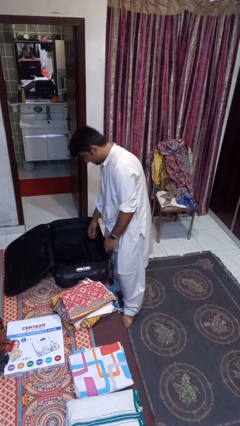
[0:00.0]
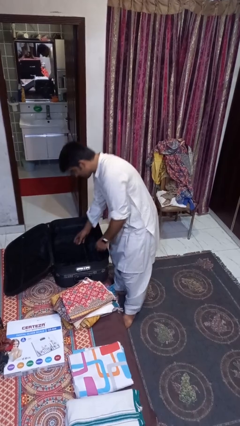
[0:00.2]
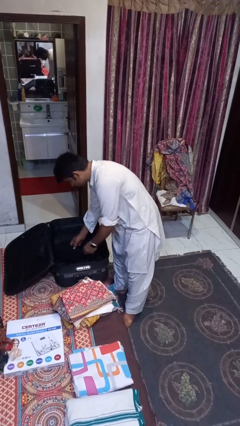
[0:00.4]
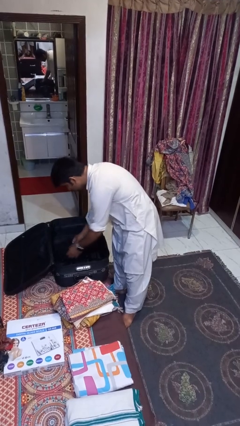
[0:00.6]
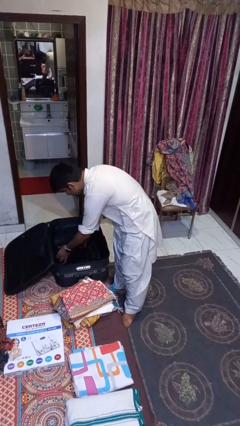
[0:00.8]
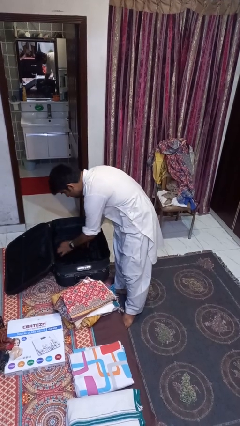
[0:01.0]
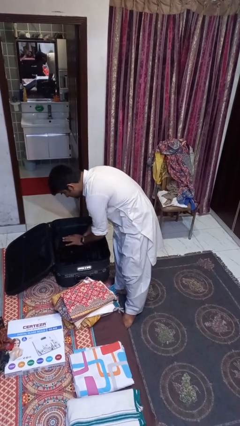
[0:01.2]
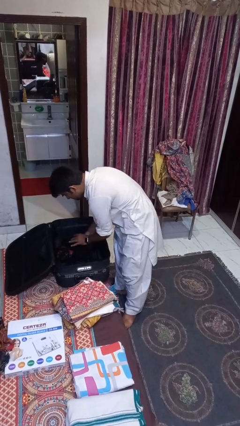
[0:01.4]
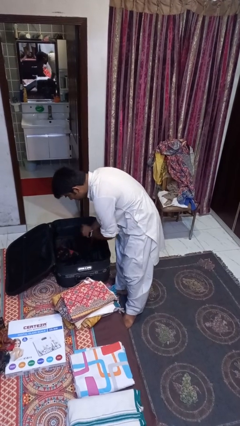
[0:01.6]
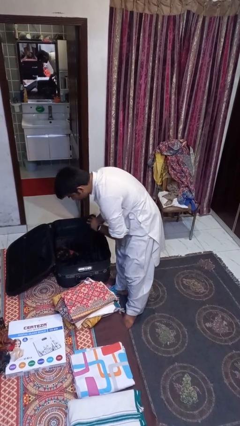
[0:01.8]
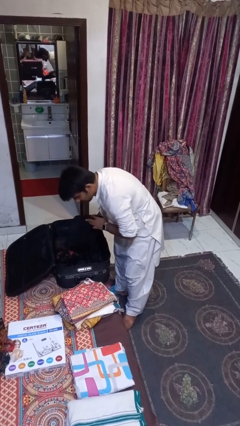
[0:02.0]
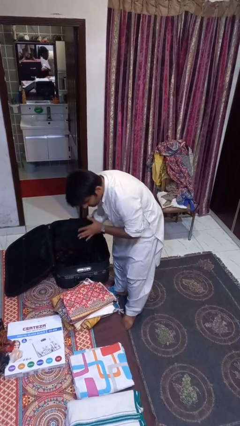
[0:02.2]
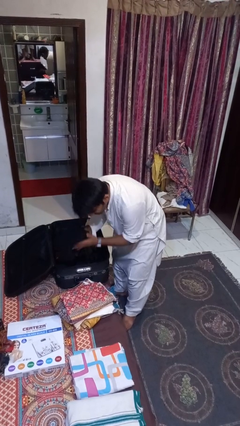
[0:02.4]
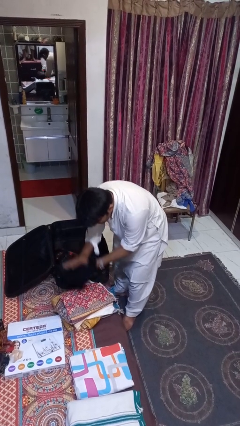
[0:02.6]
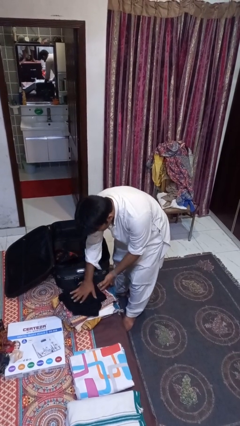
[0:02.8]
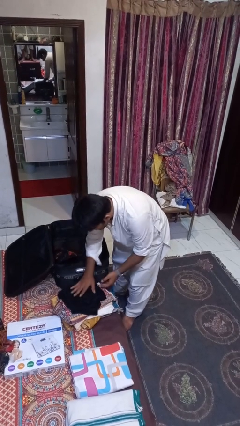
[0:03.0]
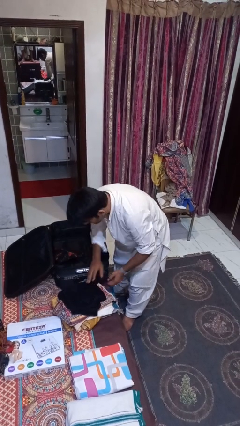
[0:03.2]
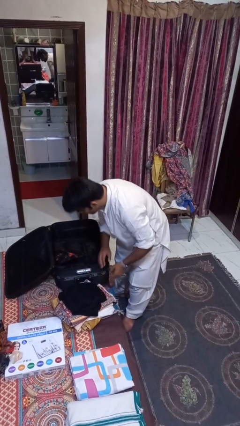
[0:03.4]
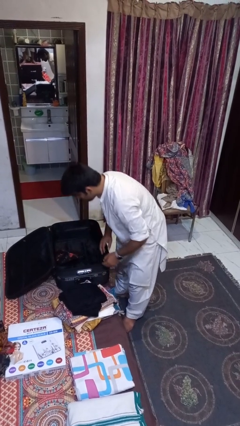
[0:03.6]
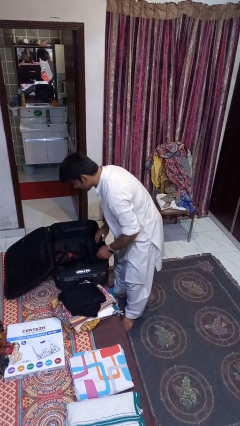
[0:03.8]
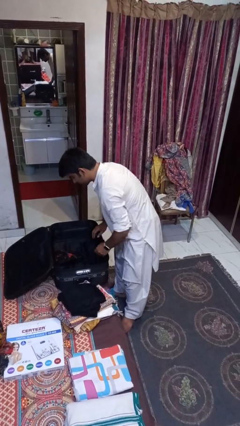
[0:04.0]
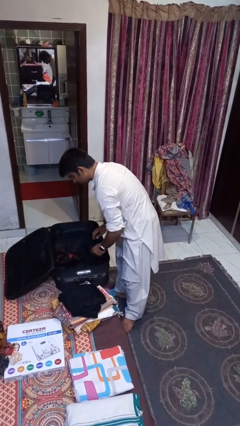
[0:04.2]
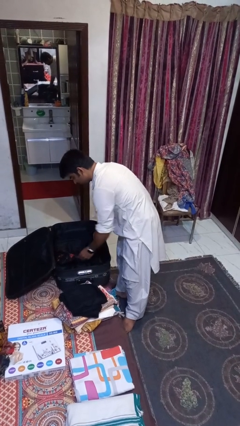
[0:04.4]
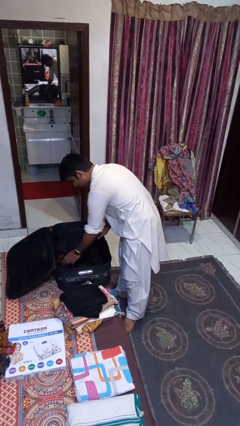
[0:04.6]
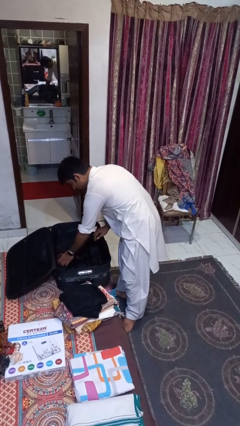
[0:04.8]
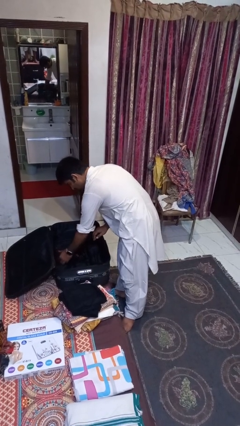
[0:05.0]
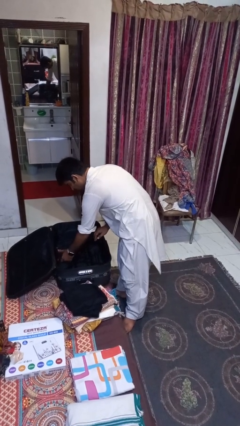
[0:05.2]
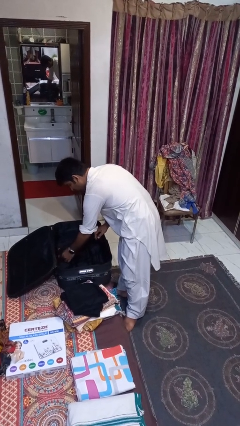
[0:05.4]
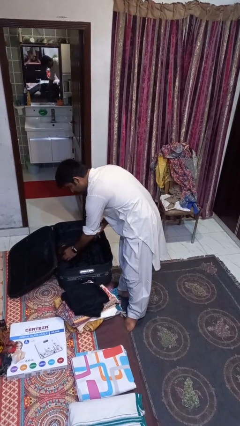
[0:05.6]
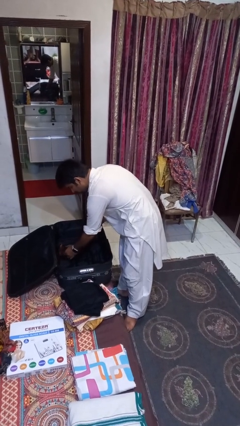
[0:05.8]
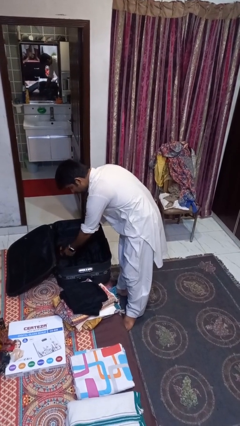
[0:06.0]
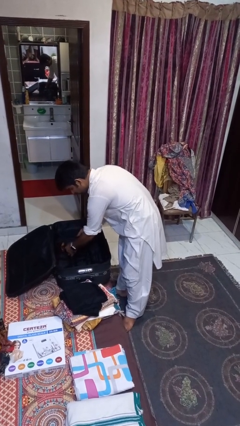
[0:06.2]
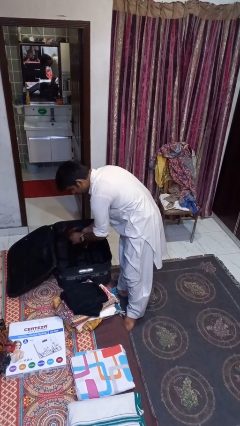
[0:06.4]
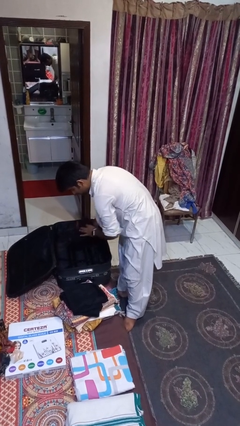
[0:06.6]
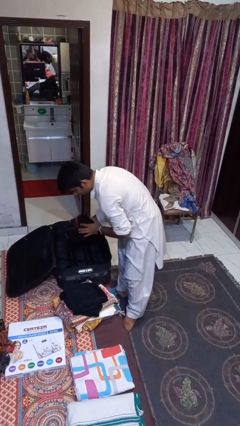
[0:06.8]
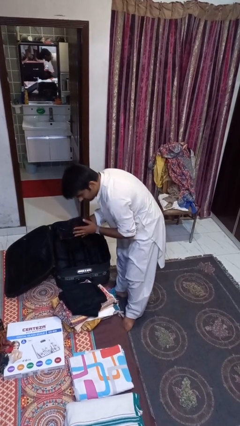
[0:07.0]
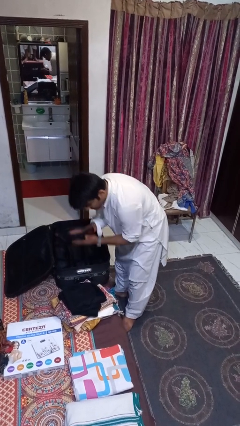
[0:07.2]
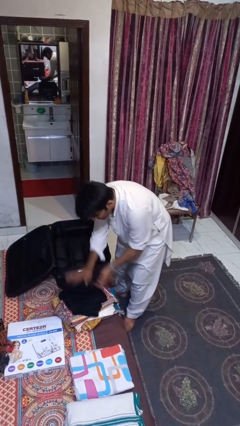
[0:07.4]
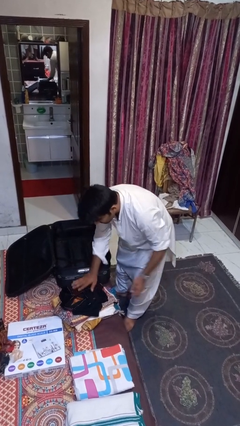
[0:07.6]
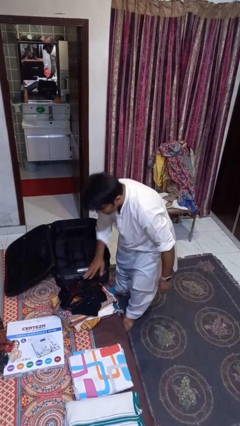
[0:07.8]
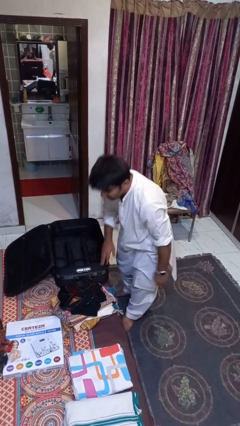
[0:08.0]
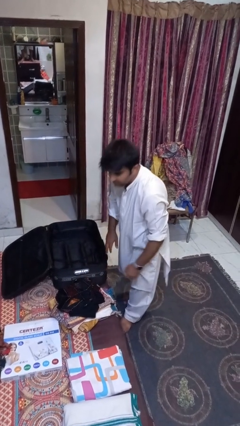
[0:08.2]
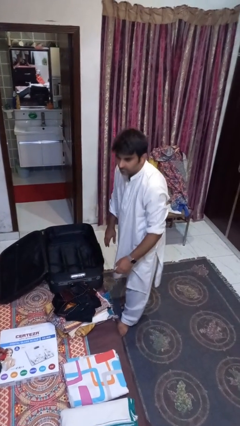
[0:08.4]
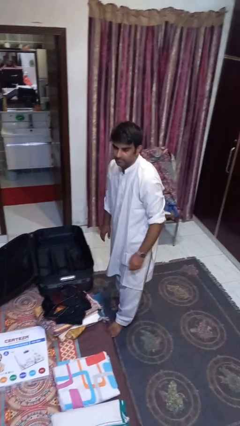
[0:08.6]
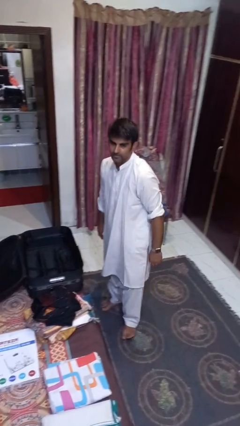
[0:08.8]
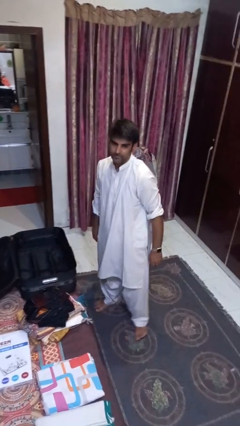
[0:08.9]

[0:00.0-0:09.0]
person unloads clothes from suitcase

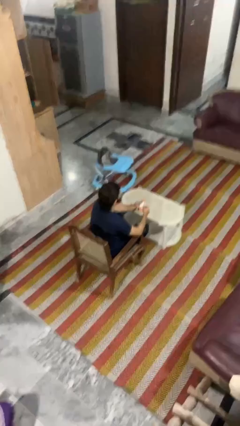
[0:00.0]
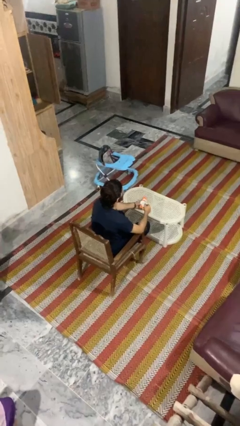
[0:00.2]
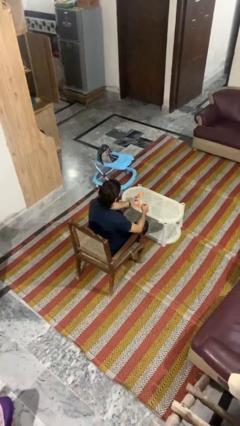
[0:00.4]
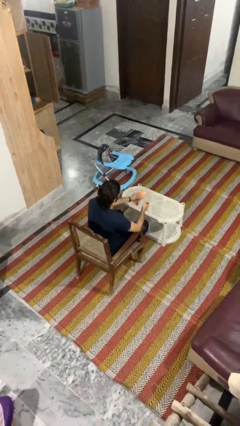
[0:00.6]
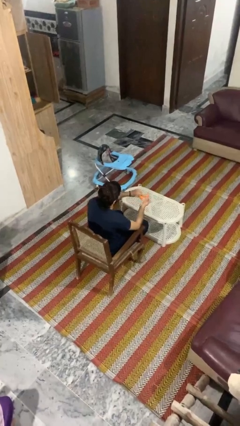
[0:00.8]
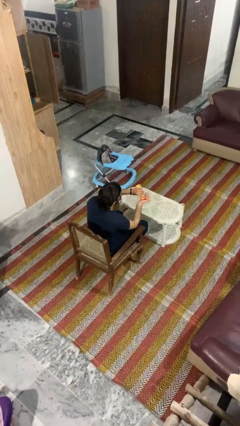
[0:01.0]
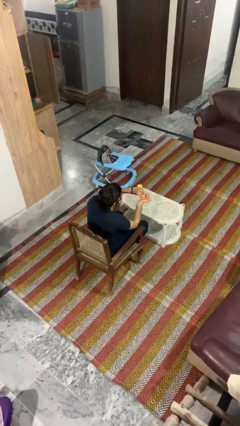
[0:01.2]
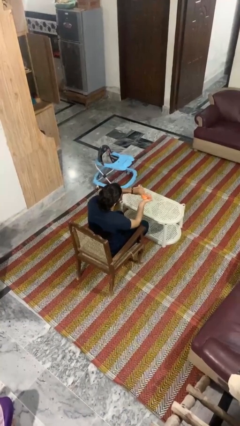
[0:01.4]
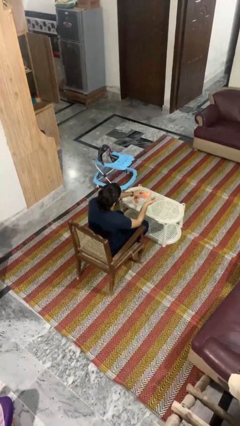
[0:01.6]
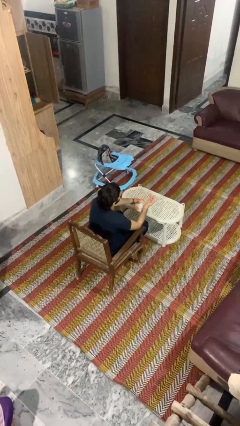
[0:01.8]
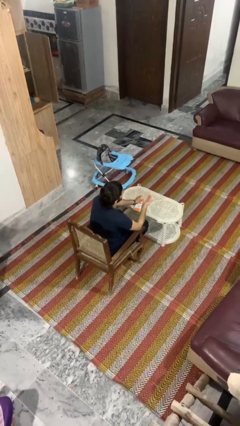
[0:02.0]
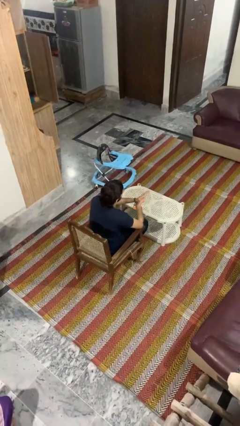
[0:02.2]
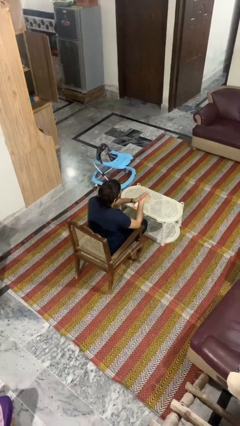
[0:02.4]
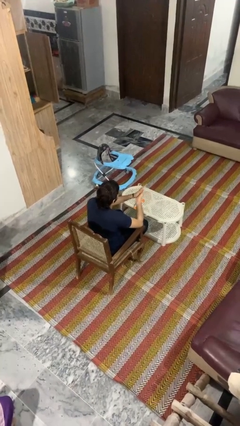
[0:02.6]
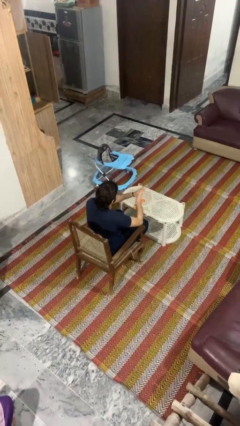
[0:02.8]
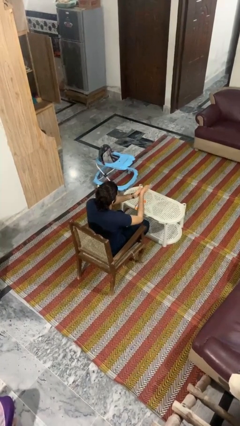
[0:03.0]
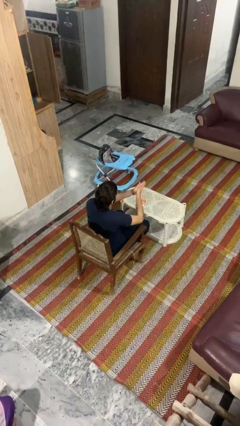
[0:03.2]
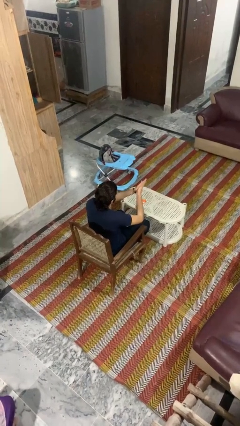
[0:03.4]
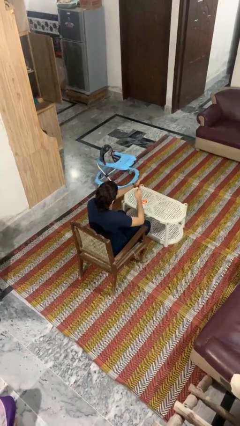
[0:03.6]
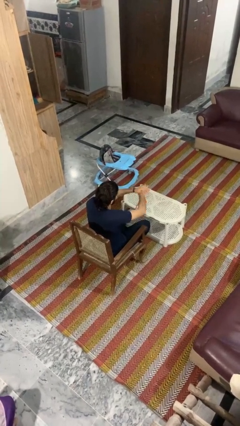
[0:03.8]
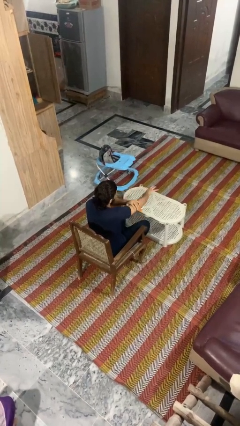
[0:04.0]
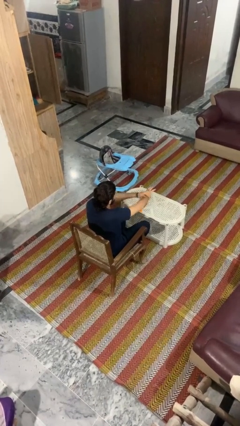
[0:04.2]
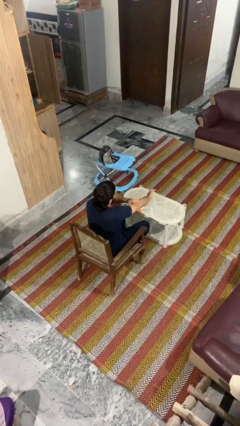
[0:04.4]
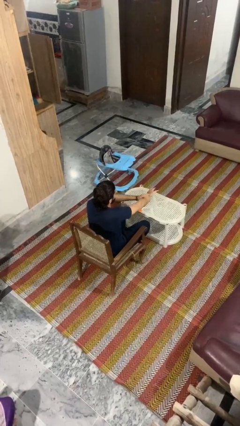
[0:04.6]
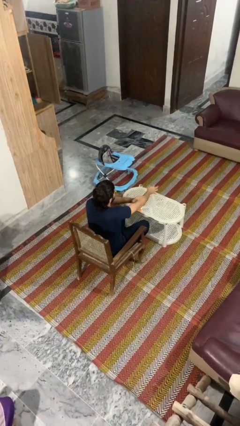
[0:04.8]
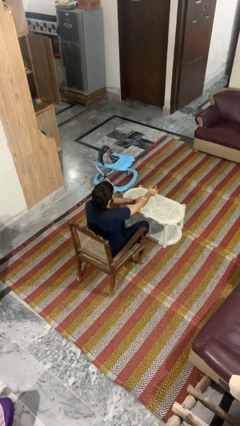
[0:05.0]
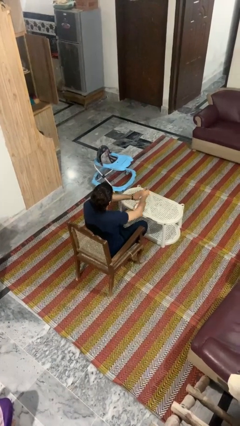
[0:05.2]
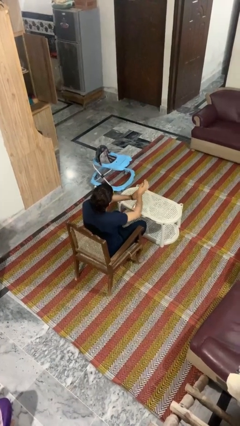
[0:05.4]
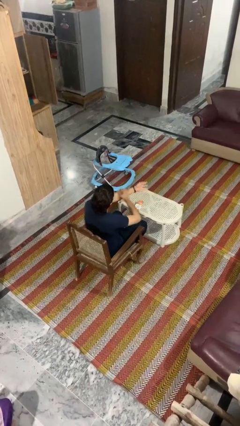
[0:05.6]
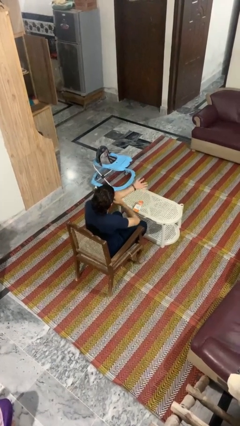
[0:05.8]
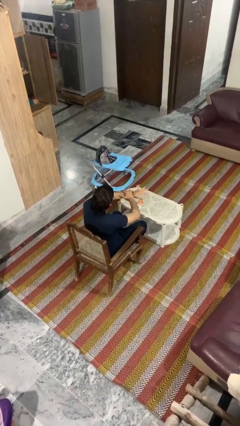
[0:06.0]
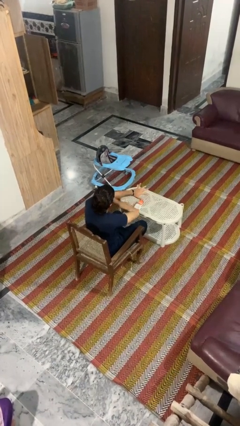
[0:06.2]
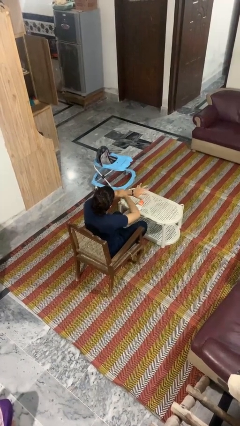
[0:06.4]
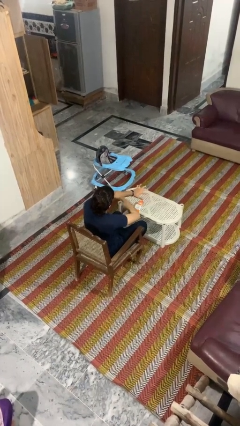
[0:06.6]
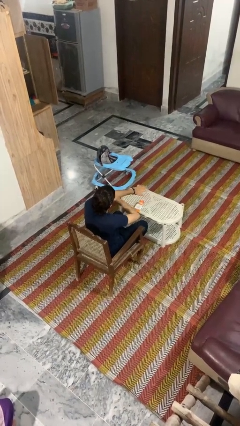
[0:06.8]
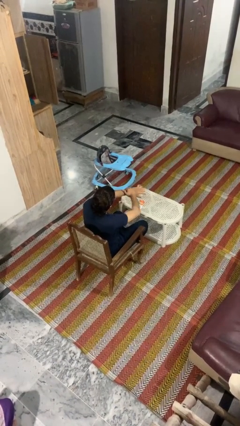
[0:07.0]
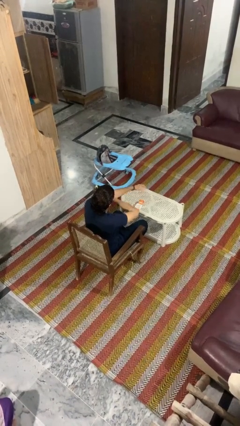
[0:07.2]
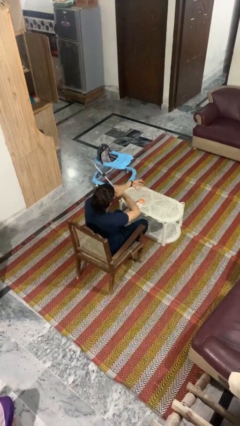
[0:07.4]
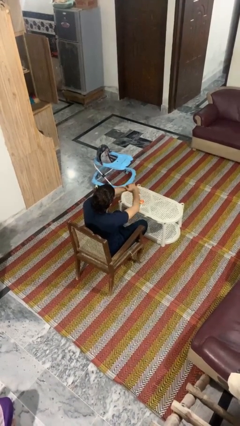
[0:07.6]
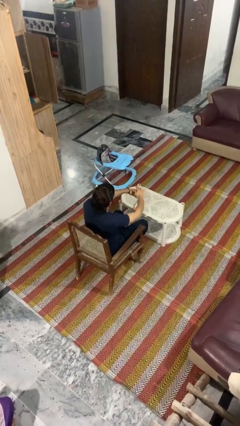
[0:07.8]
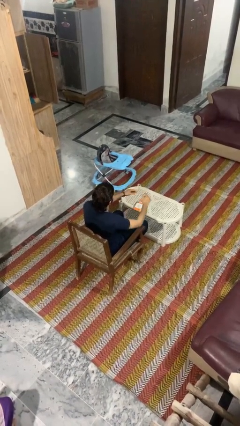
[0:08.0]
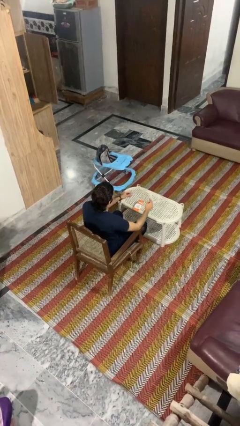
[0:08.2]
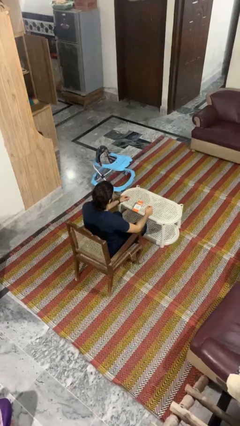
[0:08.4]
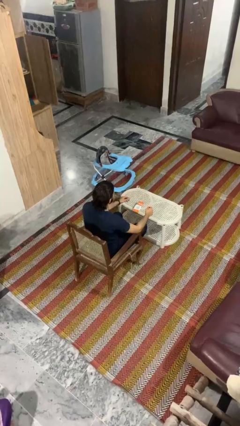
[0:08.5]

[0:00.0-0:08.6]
person applies sunscreen
